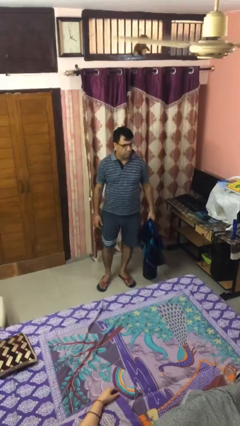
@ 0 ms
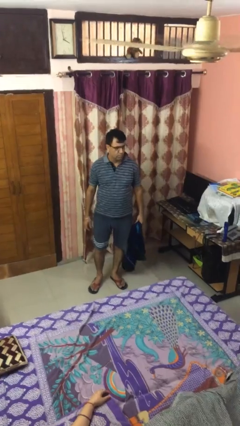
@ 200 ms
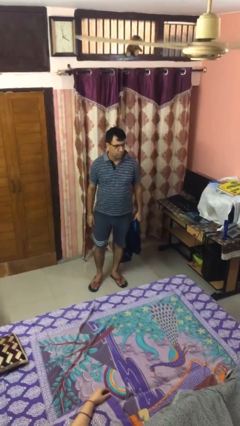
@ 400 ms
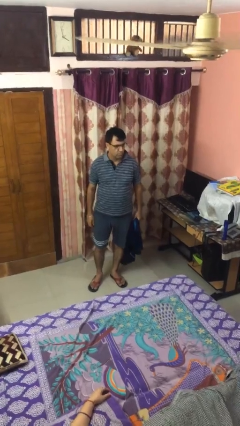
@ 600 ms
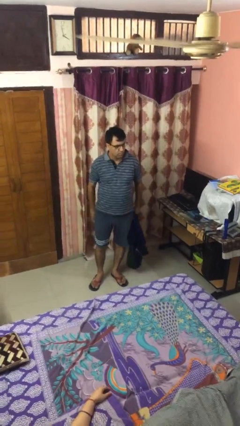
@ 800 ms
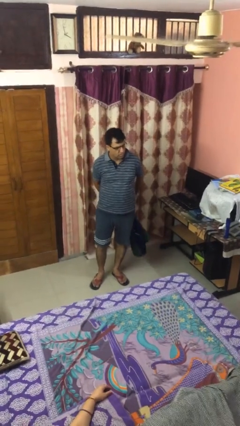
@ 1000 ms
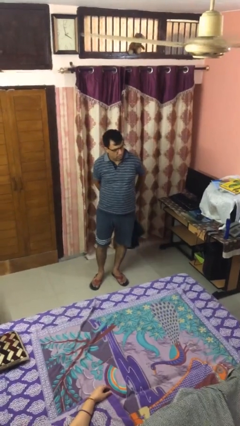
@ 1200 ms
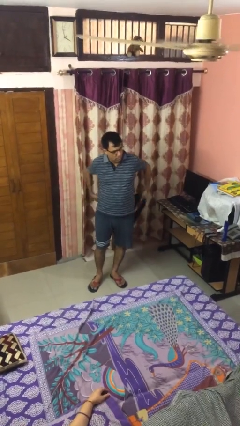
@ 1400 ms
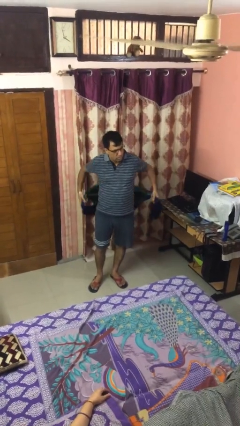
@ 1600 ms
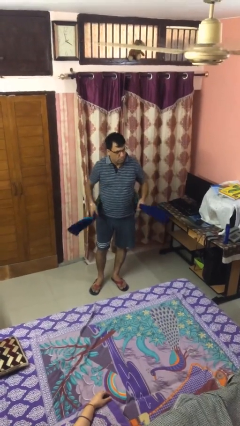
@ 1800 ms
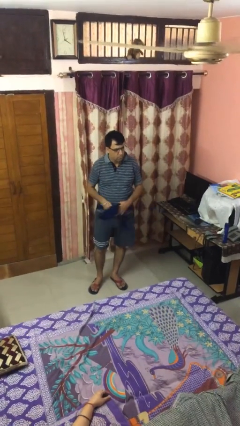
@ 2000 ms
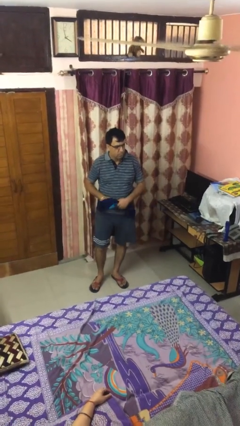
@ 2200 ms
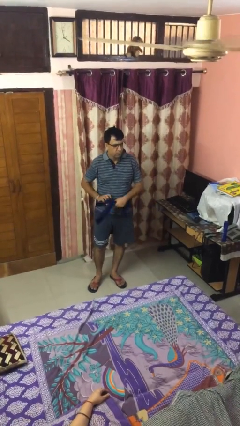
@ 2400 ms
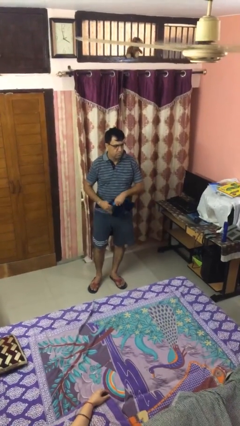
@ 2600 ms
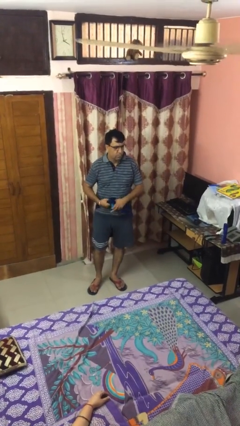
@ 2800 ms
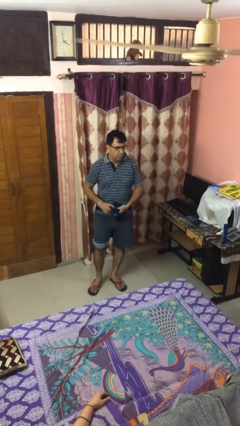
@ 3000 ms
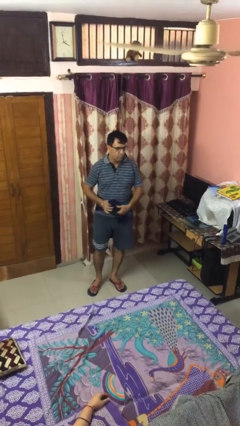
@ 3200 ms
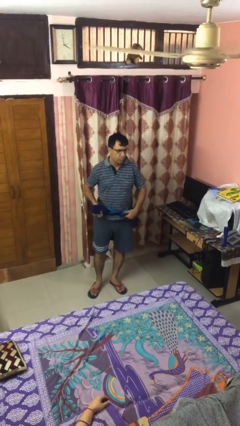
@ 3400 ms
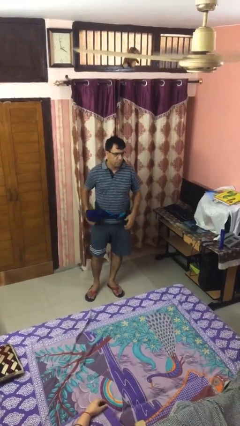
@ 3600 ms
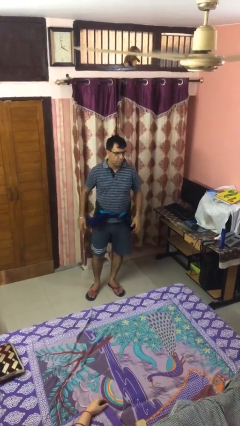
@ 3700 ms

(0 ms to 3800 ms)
person ties jacket around waist

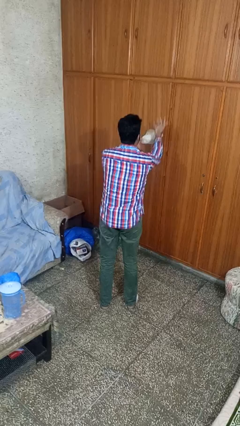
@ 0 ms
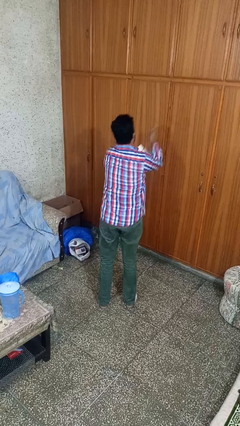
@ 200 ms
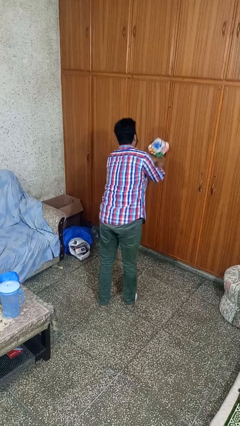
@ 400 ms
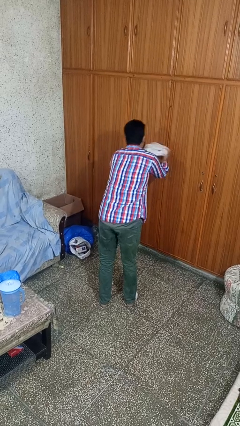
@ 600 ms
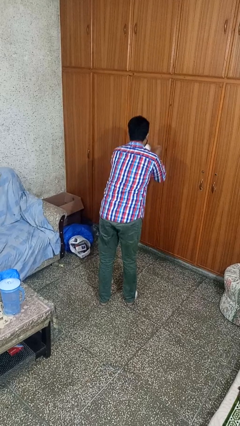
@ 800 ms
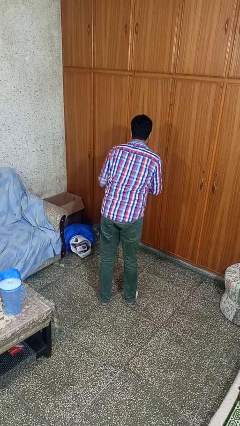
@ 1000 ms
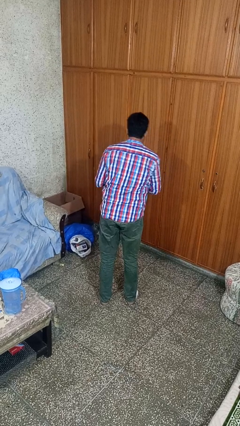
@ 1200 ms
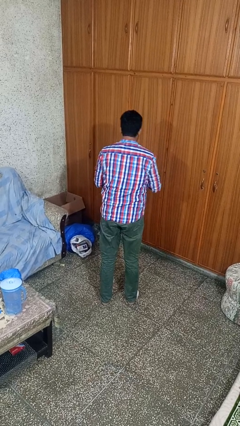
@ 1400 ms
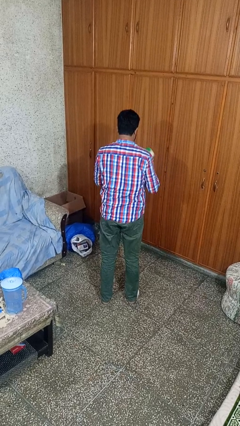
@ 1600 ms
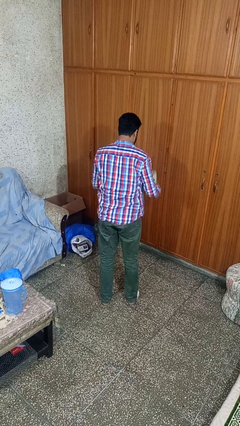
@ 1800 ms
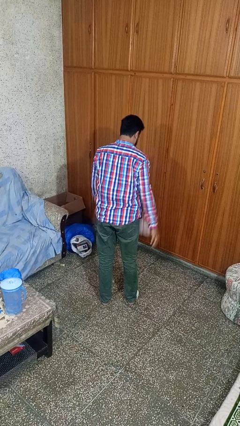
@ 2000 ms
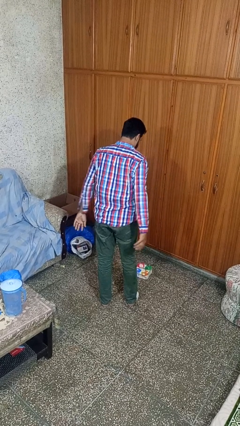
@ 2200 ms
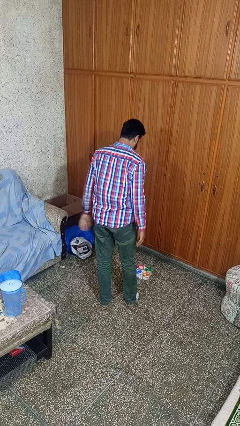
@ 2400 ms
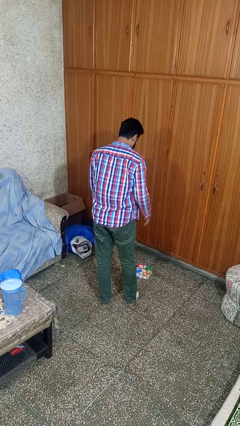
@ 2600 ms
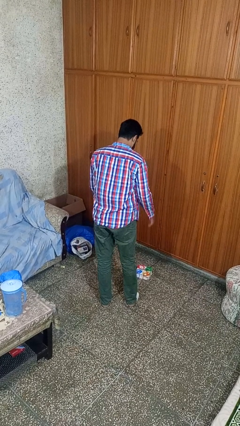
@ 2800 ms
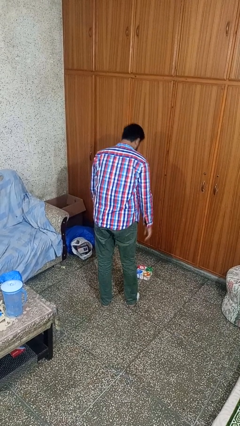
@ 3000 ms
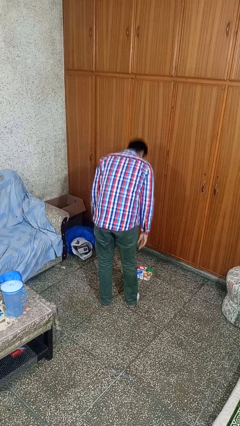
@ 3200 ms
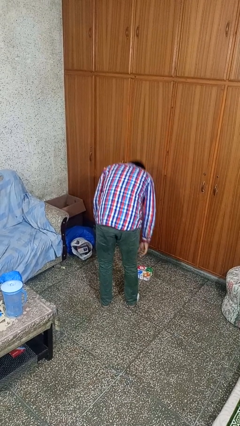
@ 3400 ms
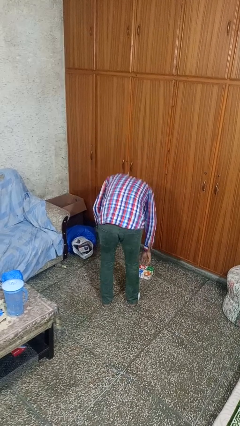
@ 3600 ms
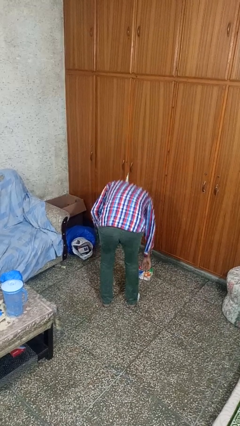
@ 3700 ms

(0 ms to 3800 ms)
person catches dropped object

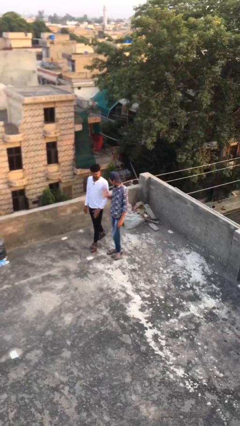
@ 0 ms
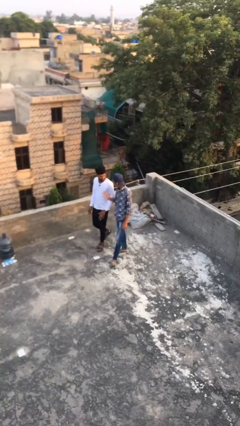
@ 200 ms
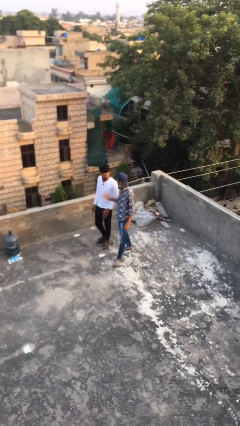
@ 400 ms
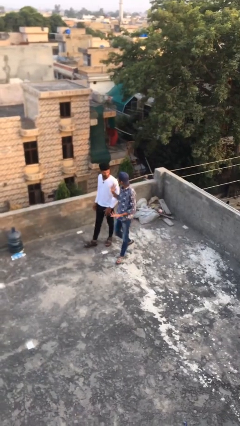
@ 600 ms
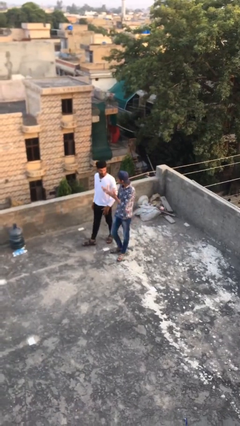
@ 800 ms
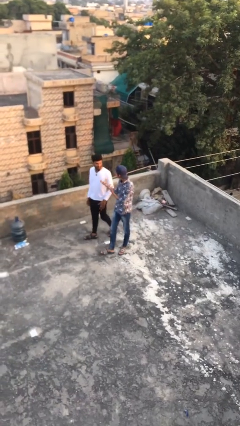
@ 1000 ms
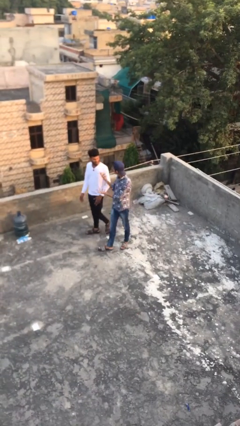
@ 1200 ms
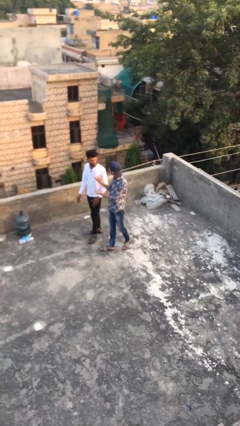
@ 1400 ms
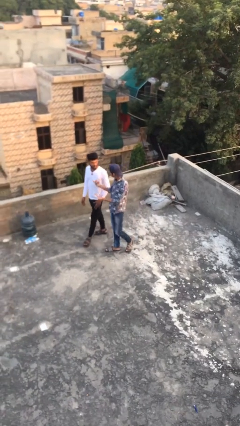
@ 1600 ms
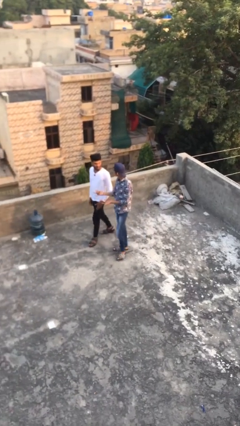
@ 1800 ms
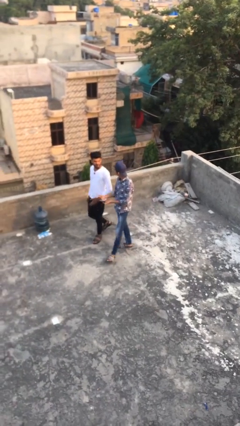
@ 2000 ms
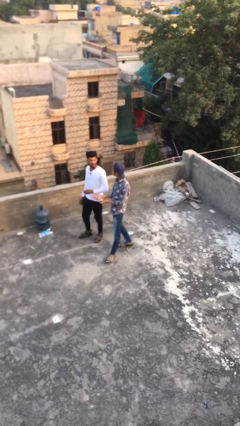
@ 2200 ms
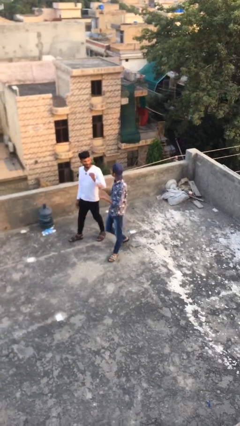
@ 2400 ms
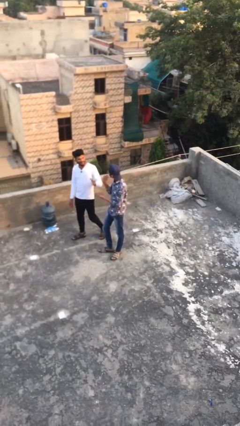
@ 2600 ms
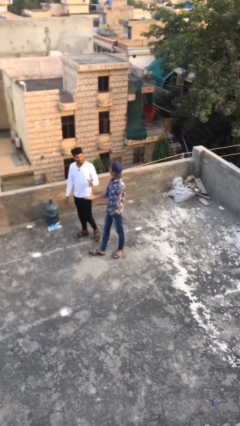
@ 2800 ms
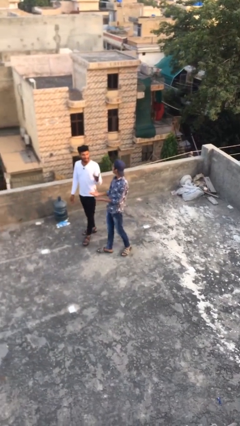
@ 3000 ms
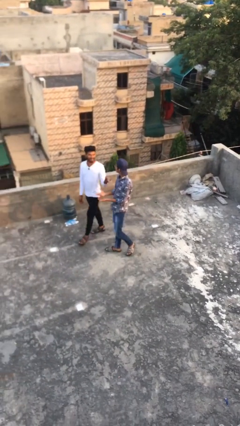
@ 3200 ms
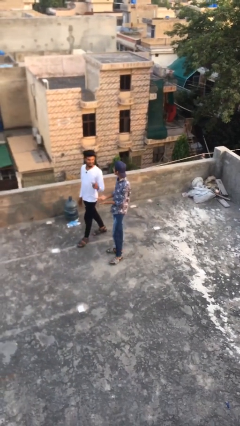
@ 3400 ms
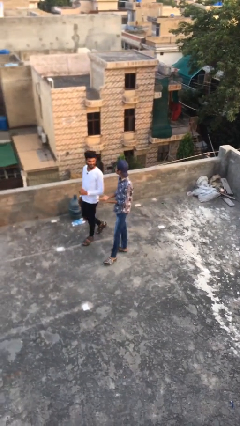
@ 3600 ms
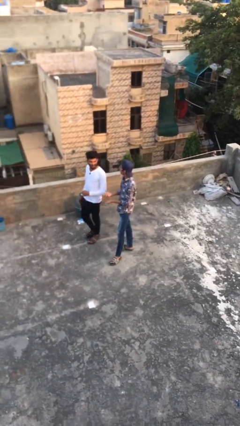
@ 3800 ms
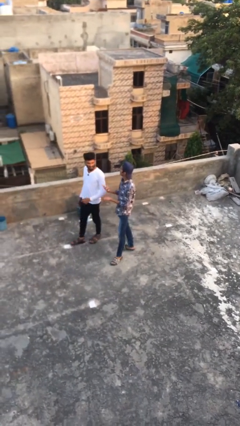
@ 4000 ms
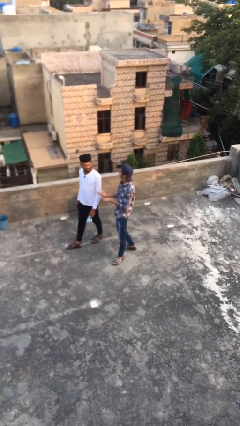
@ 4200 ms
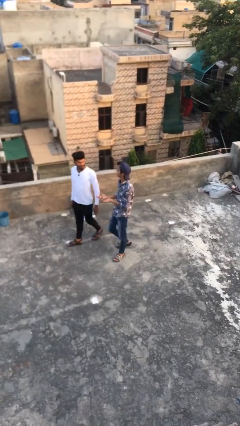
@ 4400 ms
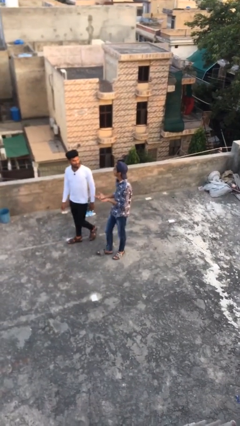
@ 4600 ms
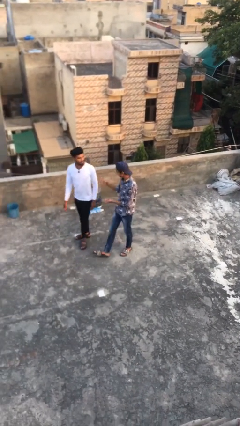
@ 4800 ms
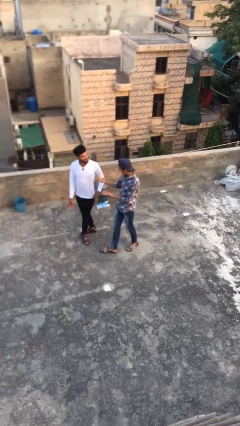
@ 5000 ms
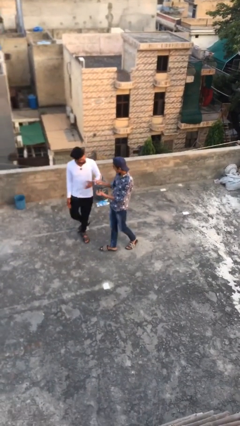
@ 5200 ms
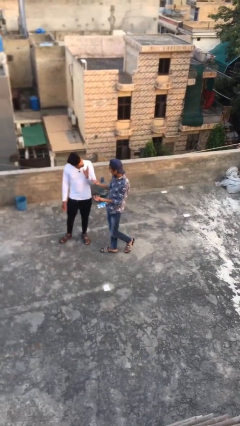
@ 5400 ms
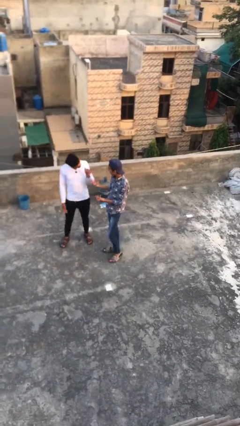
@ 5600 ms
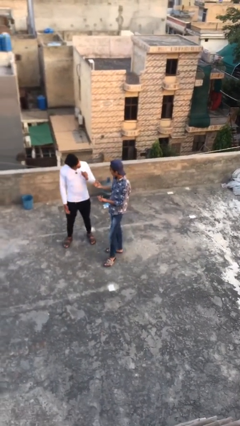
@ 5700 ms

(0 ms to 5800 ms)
person talks to person

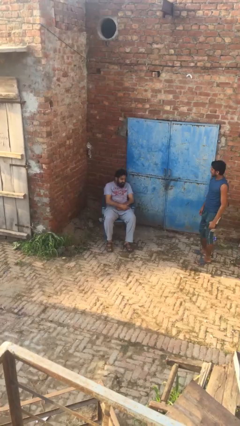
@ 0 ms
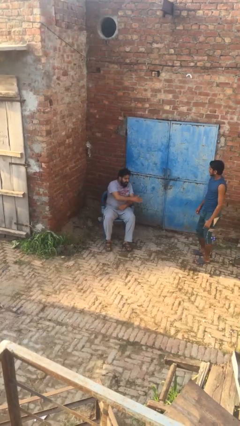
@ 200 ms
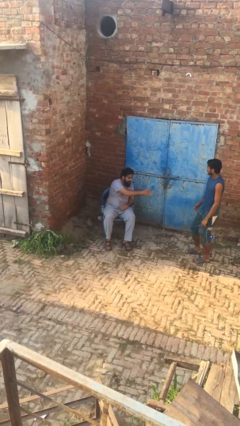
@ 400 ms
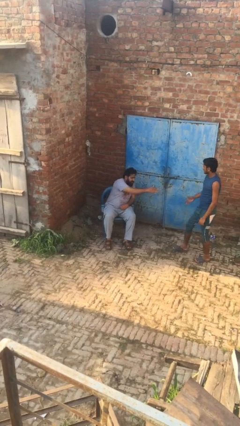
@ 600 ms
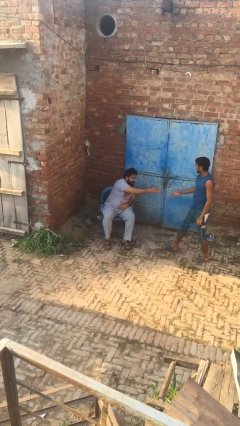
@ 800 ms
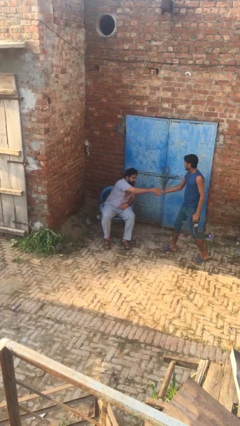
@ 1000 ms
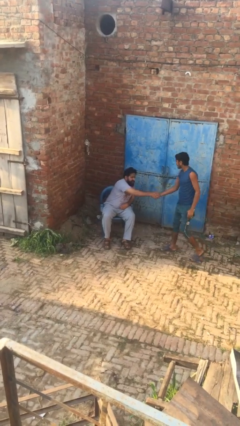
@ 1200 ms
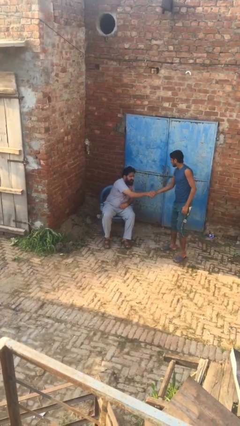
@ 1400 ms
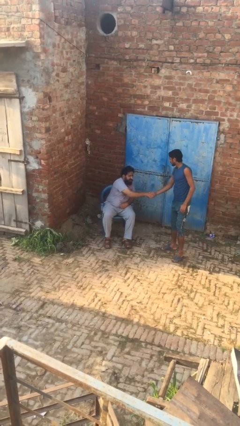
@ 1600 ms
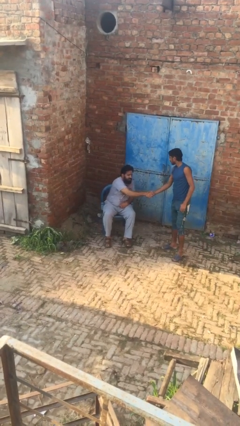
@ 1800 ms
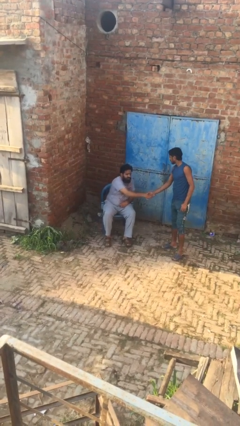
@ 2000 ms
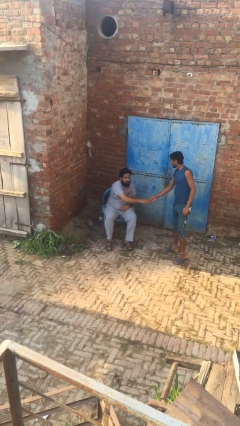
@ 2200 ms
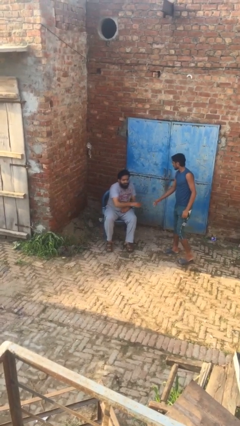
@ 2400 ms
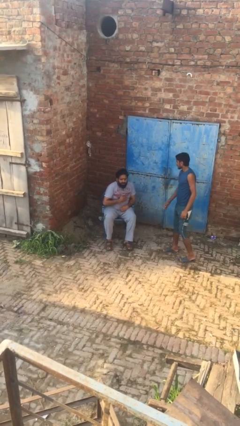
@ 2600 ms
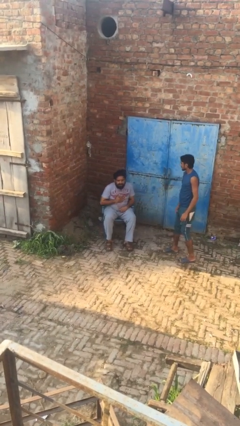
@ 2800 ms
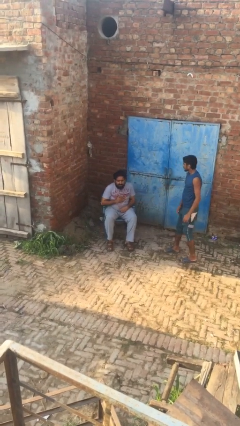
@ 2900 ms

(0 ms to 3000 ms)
person shakes hand

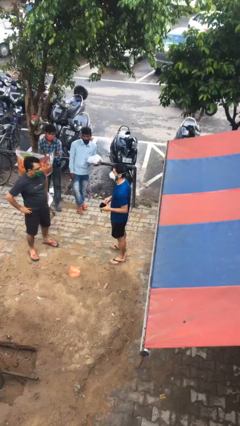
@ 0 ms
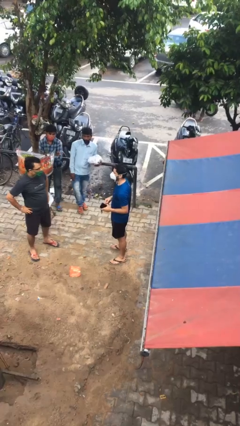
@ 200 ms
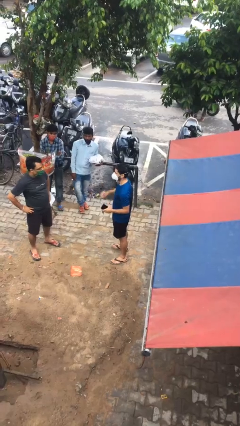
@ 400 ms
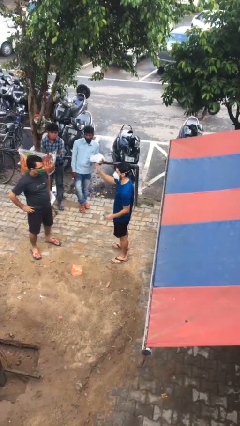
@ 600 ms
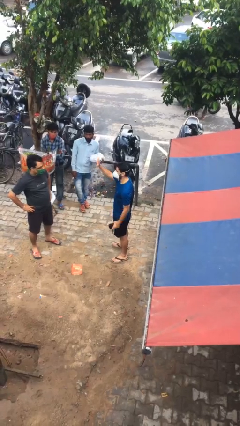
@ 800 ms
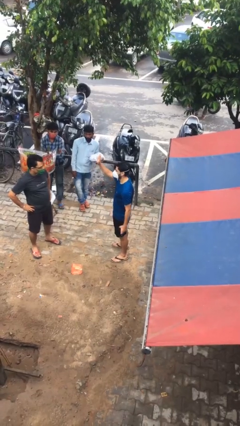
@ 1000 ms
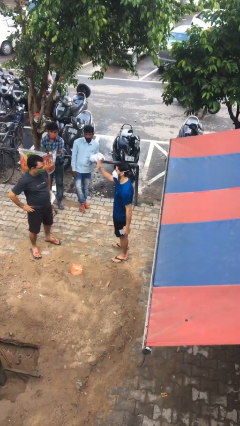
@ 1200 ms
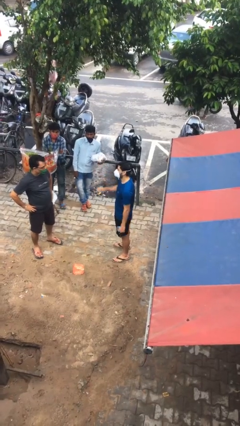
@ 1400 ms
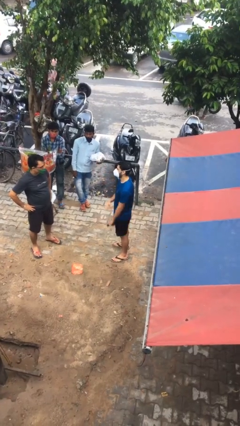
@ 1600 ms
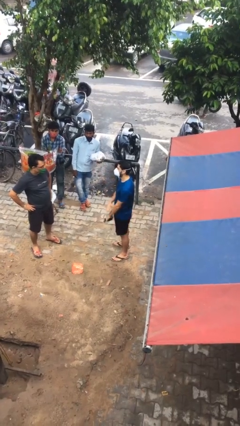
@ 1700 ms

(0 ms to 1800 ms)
person waves at person
